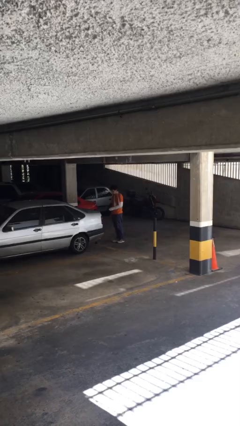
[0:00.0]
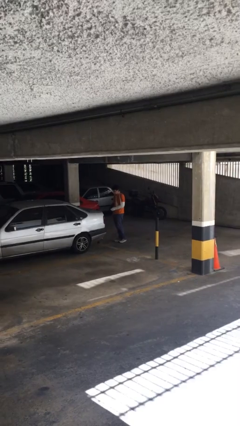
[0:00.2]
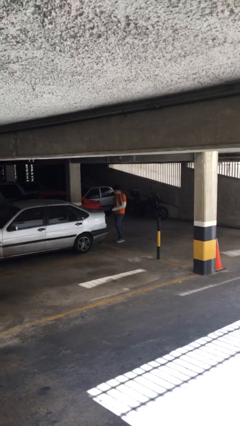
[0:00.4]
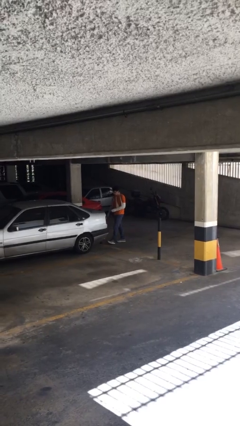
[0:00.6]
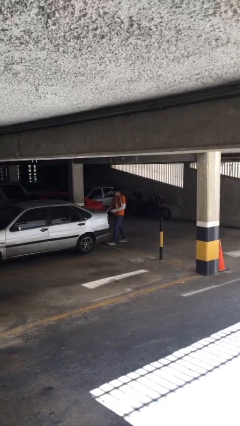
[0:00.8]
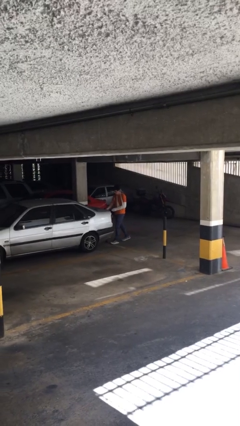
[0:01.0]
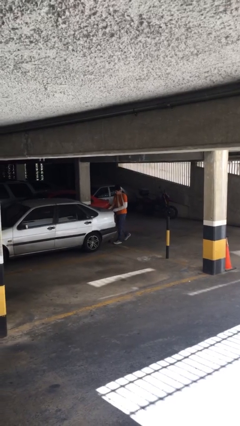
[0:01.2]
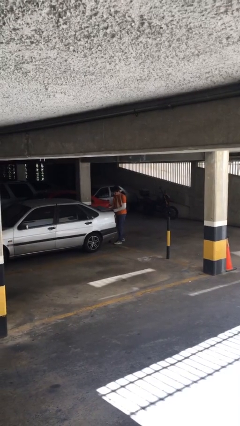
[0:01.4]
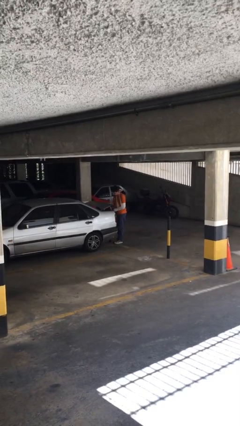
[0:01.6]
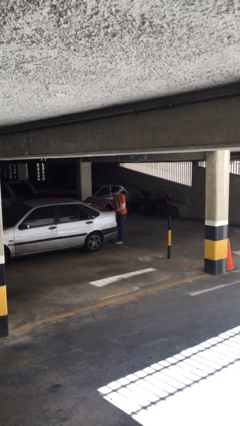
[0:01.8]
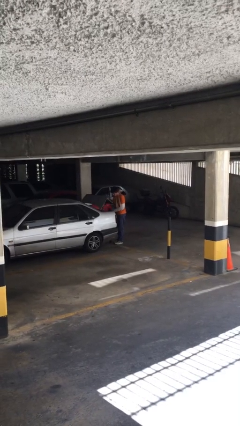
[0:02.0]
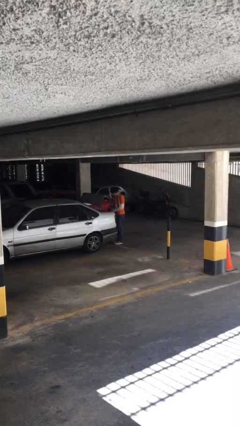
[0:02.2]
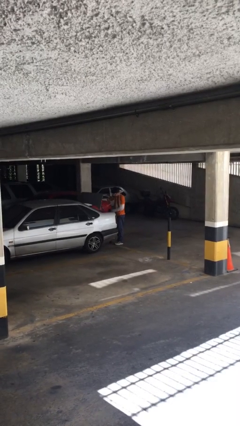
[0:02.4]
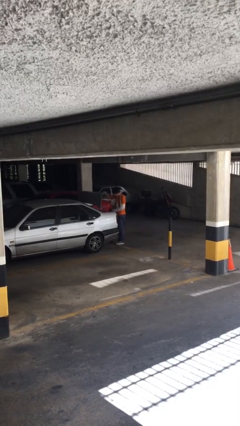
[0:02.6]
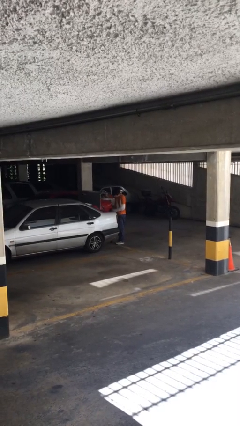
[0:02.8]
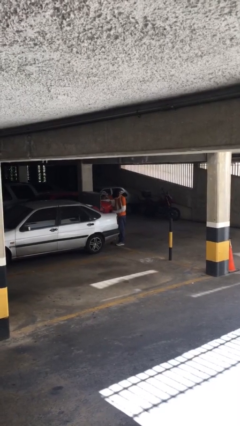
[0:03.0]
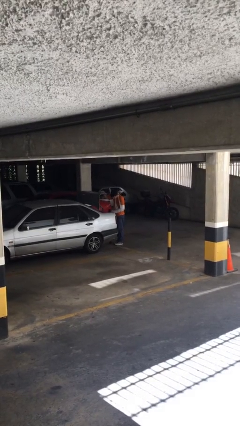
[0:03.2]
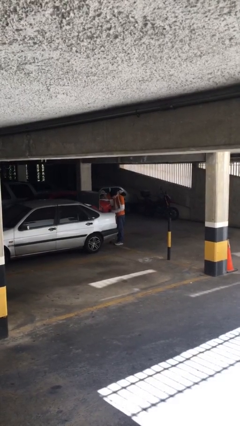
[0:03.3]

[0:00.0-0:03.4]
person opens car trunk

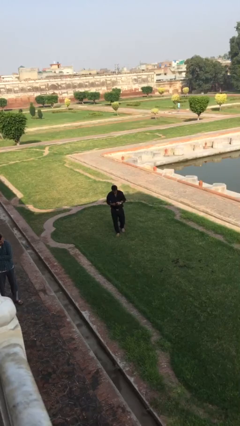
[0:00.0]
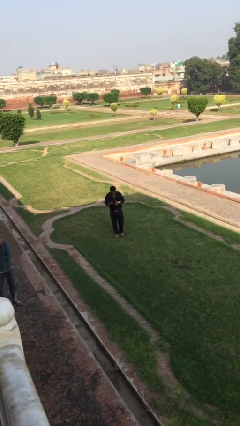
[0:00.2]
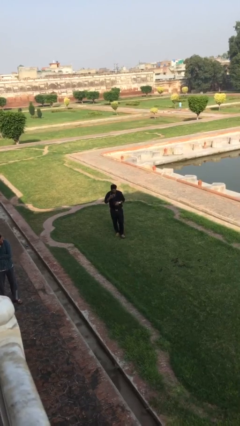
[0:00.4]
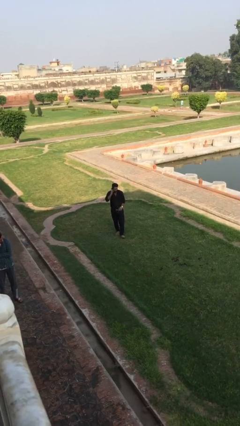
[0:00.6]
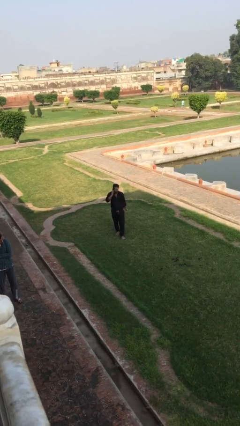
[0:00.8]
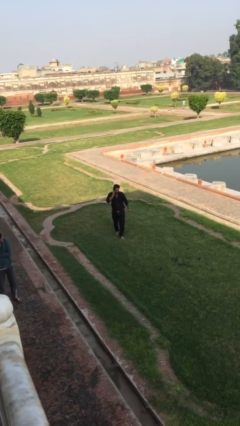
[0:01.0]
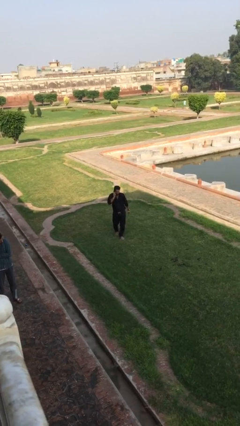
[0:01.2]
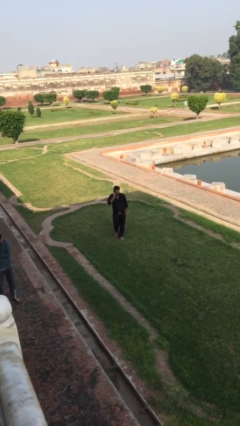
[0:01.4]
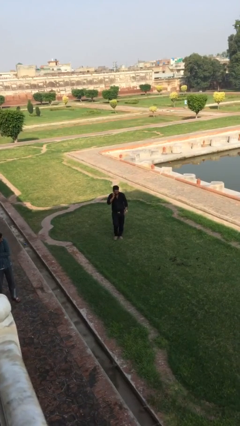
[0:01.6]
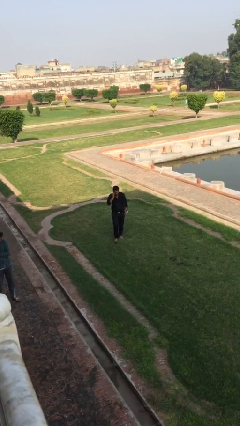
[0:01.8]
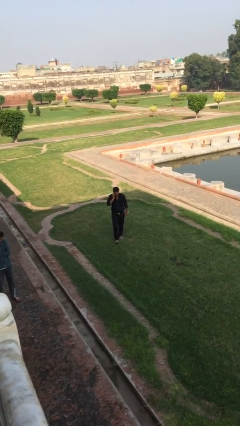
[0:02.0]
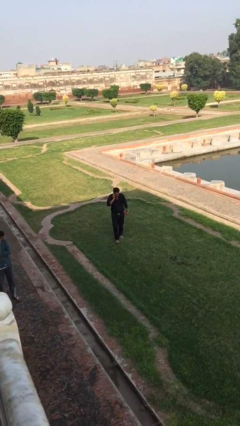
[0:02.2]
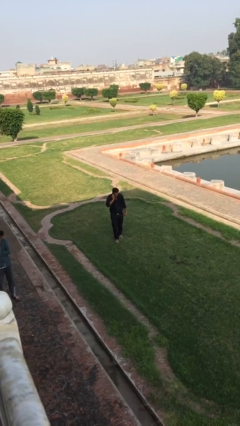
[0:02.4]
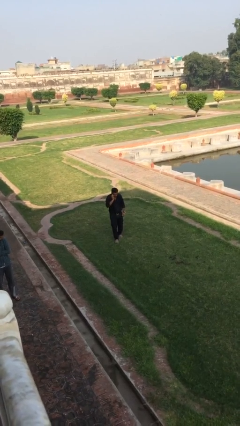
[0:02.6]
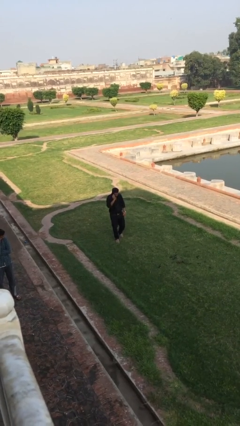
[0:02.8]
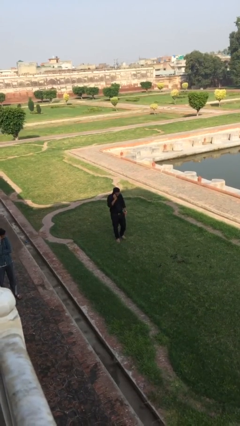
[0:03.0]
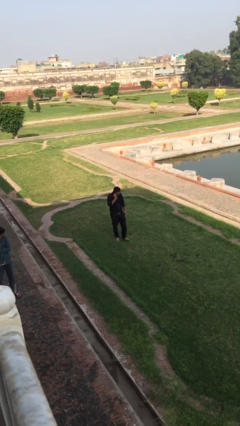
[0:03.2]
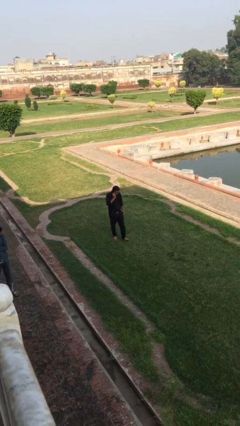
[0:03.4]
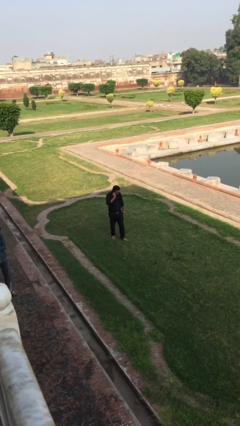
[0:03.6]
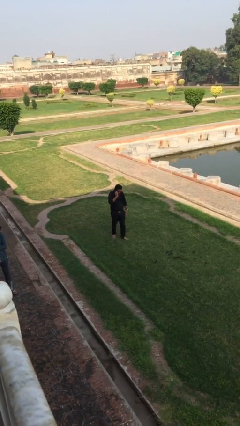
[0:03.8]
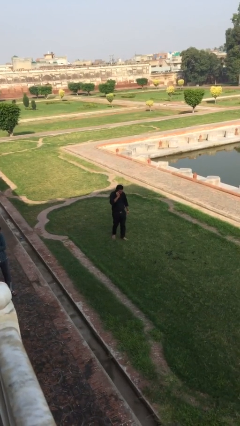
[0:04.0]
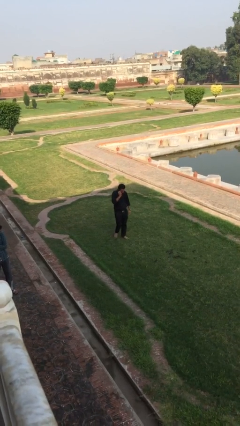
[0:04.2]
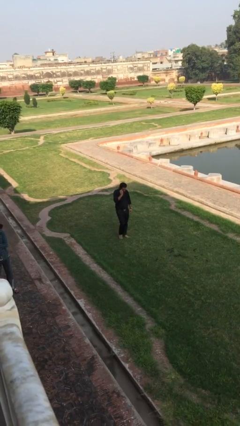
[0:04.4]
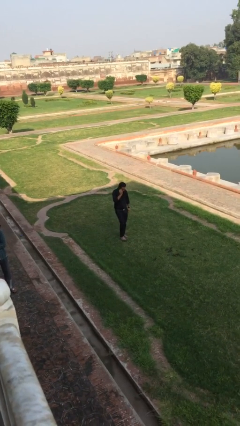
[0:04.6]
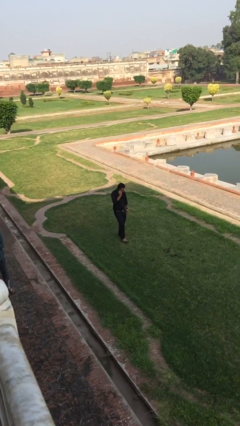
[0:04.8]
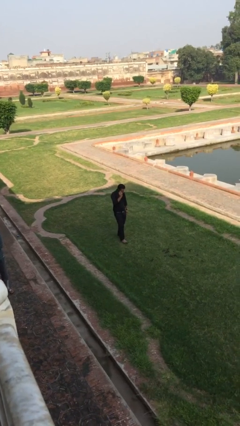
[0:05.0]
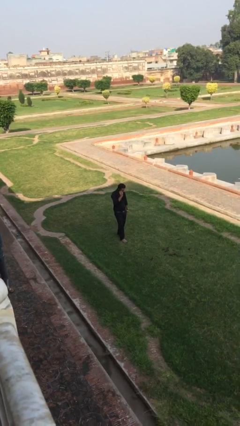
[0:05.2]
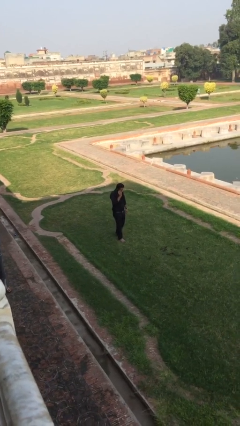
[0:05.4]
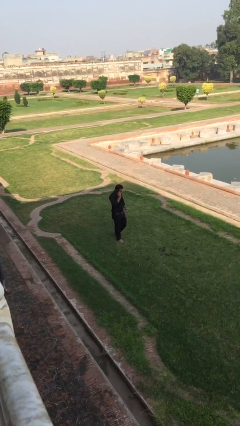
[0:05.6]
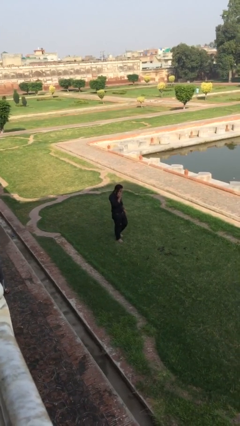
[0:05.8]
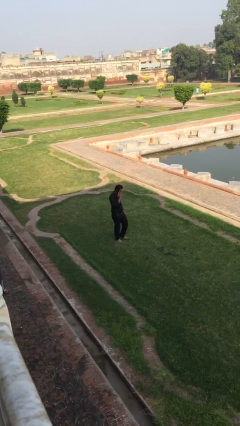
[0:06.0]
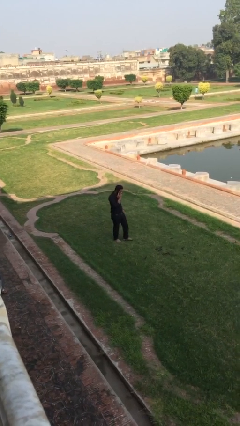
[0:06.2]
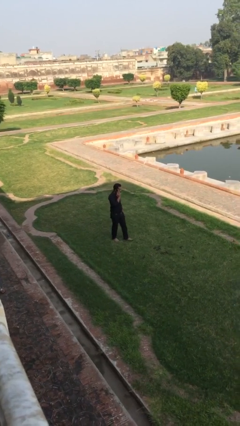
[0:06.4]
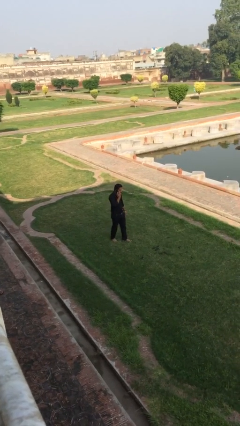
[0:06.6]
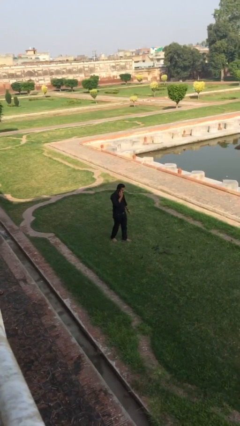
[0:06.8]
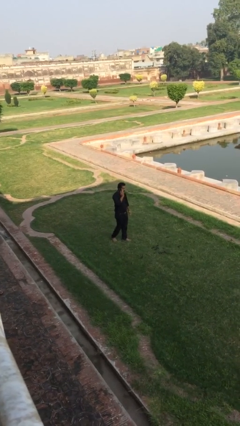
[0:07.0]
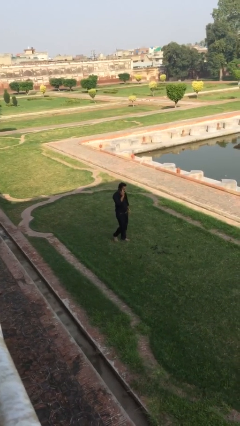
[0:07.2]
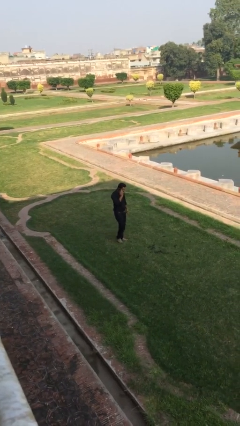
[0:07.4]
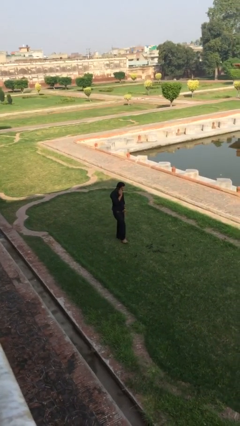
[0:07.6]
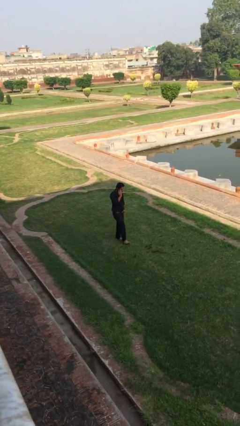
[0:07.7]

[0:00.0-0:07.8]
person talks on phone

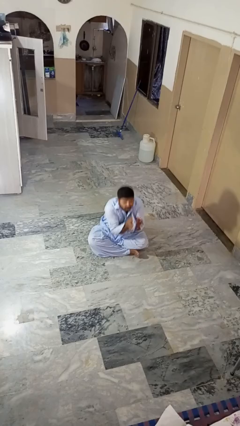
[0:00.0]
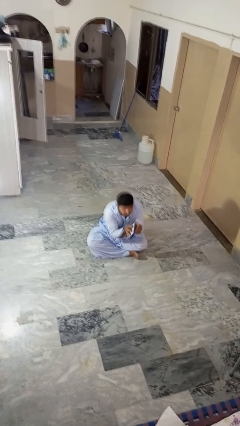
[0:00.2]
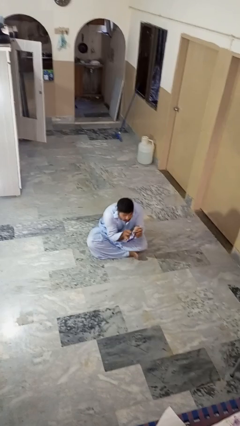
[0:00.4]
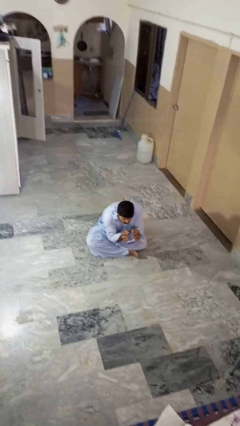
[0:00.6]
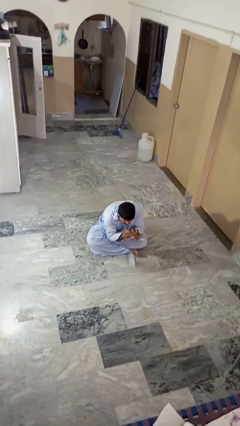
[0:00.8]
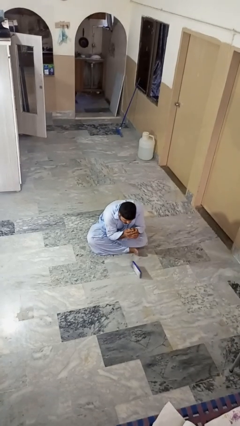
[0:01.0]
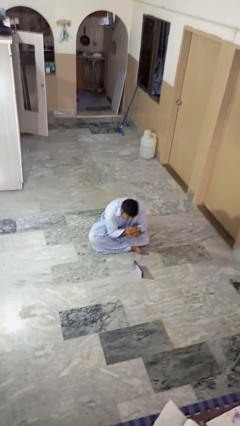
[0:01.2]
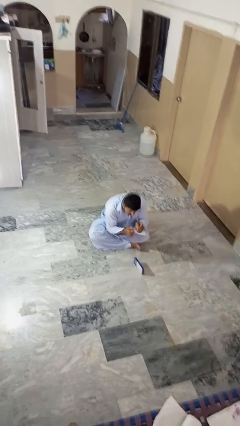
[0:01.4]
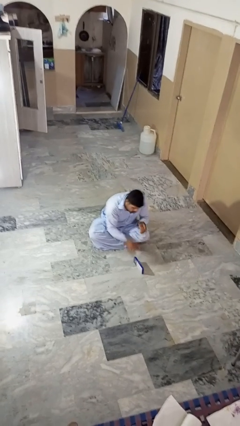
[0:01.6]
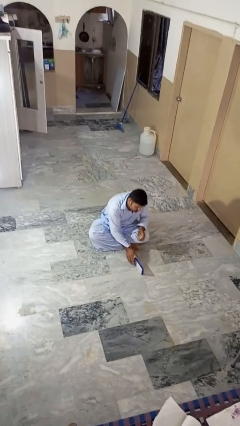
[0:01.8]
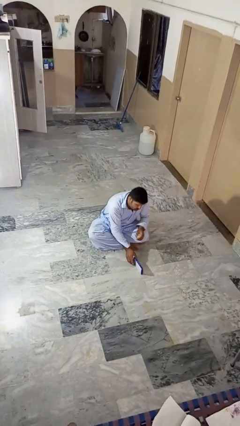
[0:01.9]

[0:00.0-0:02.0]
person catches dropped object

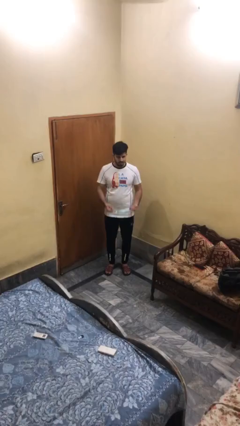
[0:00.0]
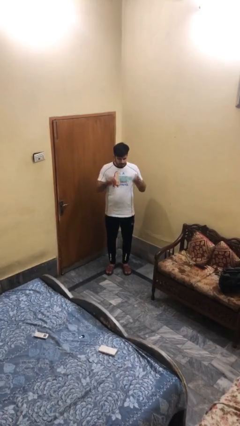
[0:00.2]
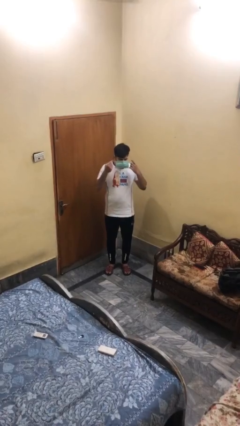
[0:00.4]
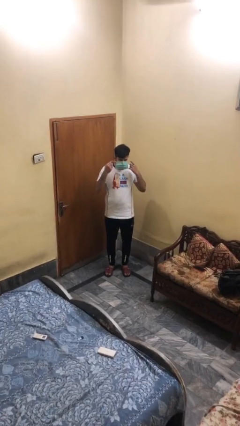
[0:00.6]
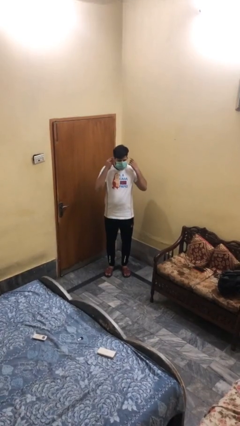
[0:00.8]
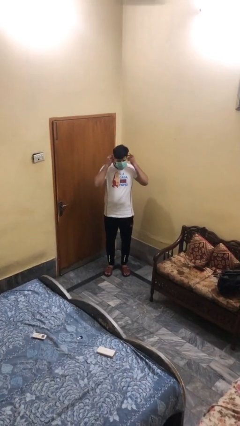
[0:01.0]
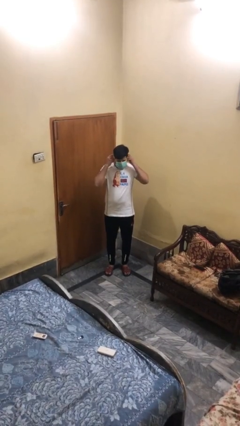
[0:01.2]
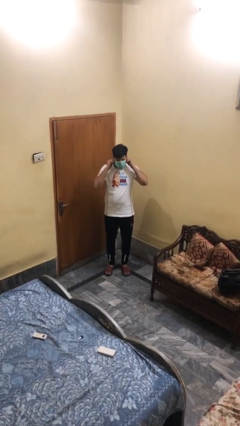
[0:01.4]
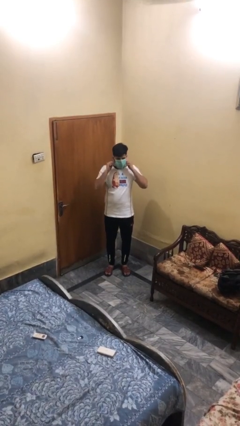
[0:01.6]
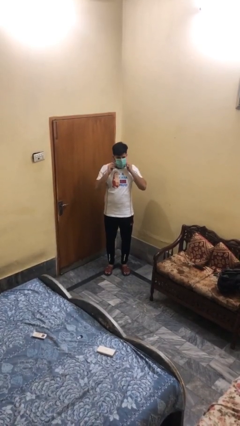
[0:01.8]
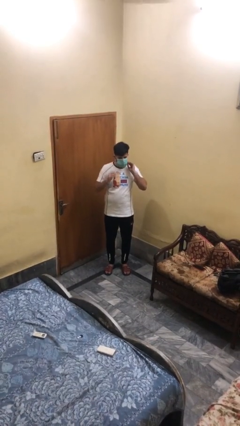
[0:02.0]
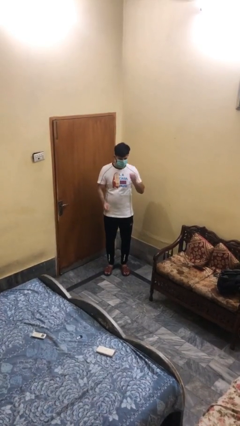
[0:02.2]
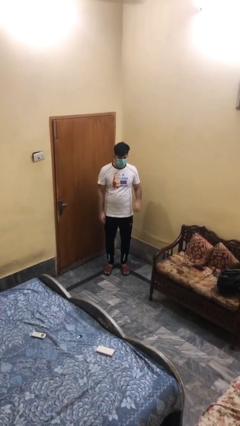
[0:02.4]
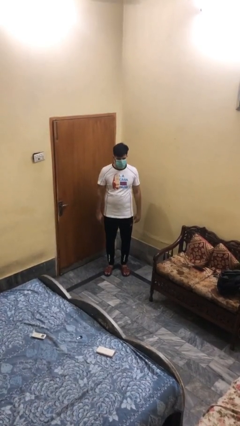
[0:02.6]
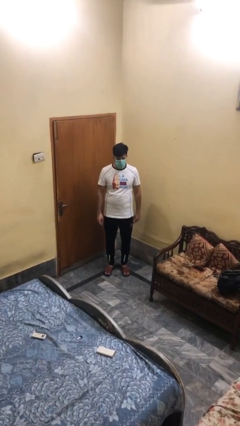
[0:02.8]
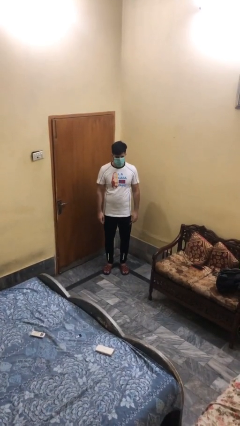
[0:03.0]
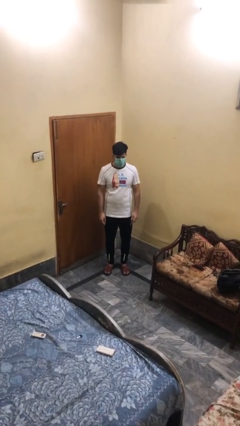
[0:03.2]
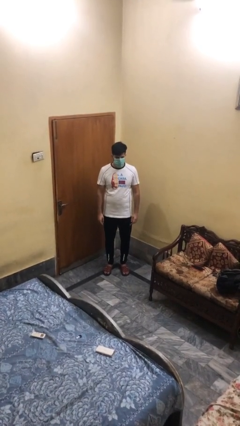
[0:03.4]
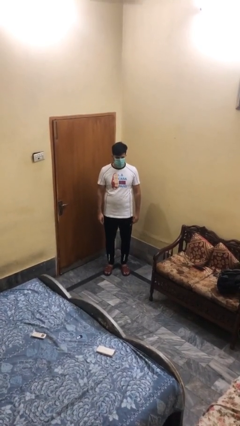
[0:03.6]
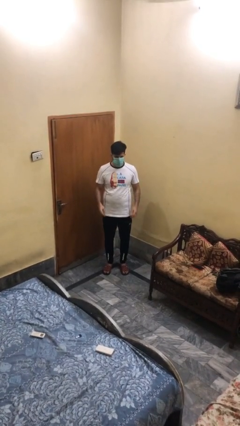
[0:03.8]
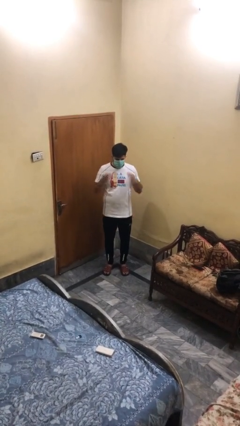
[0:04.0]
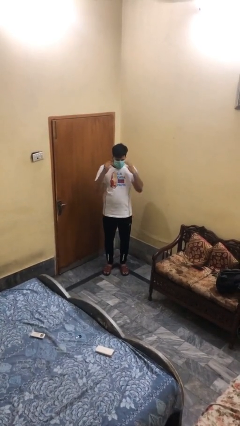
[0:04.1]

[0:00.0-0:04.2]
person puts on facemask

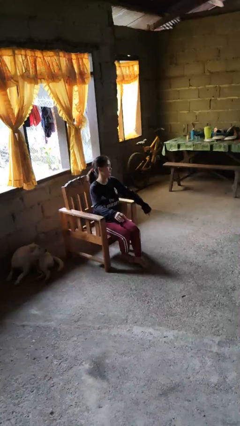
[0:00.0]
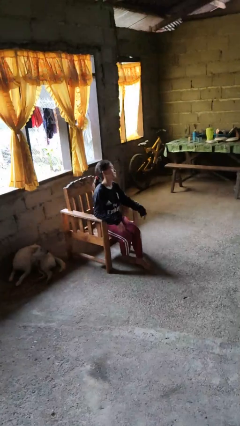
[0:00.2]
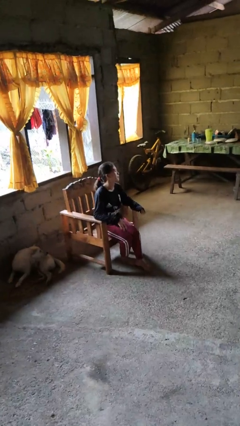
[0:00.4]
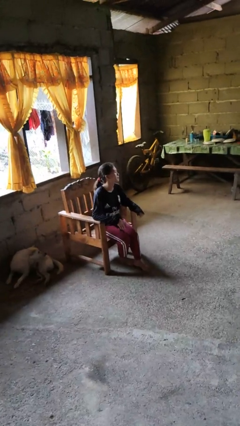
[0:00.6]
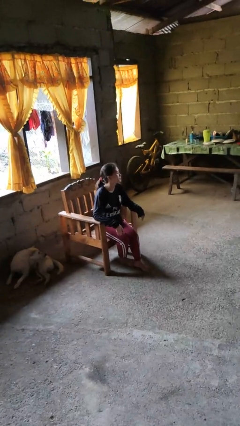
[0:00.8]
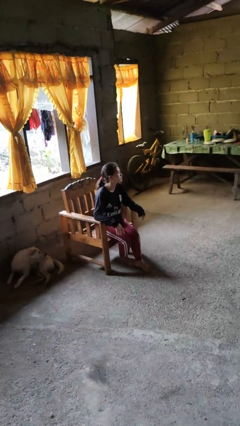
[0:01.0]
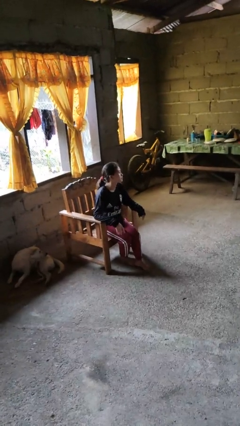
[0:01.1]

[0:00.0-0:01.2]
person sits down
